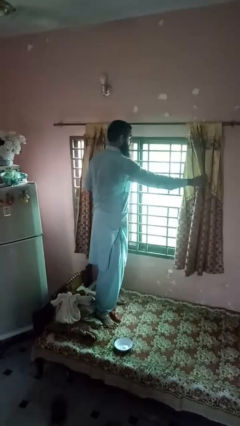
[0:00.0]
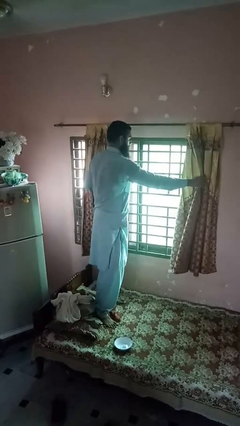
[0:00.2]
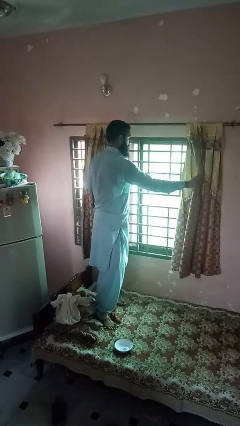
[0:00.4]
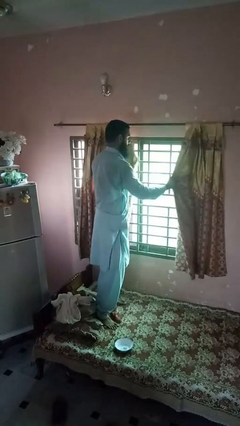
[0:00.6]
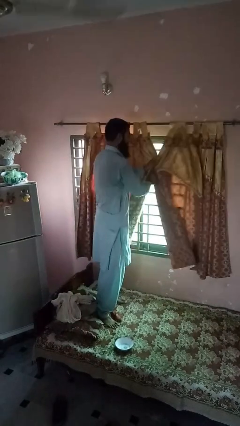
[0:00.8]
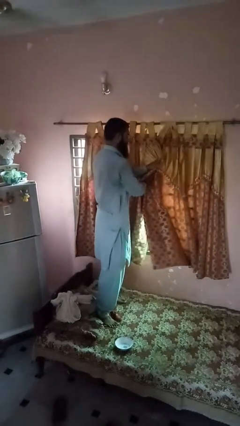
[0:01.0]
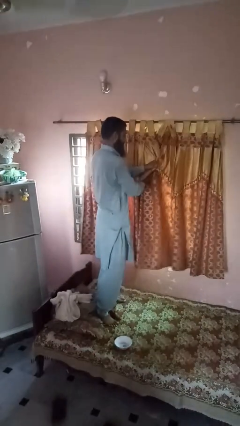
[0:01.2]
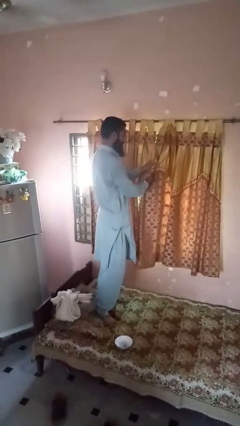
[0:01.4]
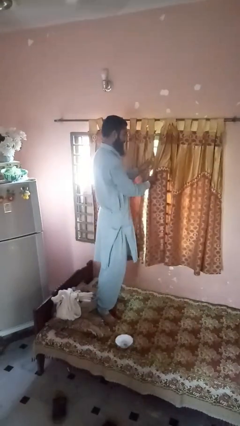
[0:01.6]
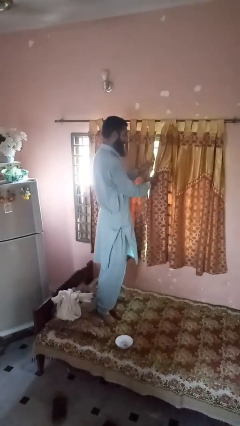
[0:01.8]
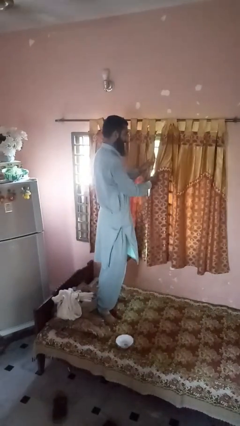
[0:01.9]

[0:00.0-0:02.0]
person closes curtains

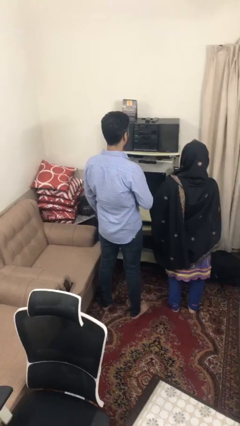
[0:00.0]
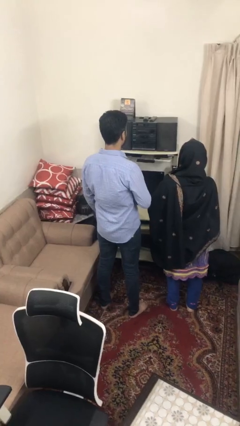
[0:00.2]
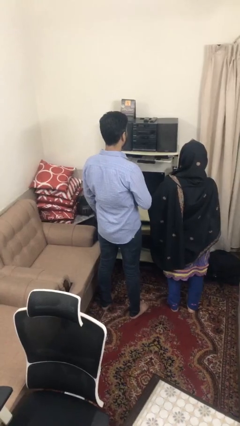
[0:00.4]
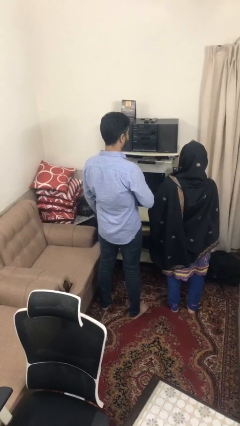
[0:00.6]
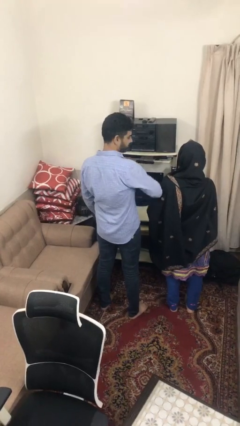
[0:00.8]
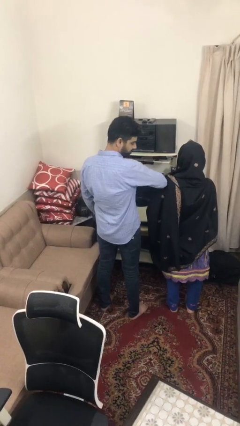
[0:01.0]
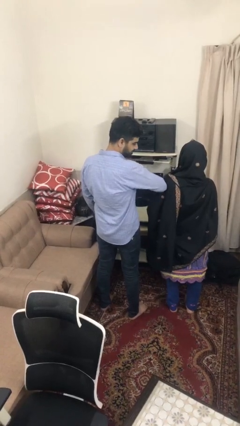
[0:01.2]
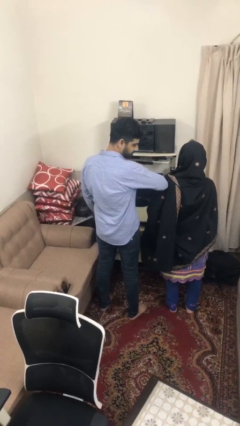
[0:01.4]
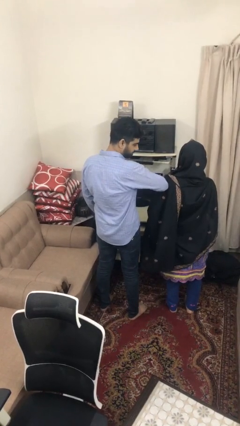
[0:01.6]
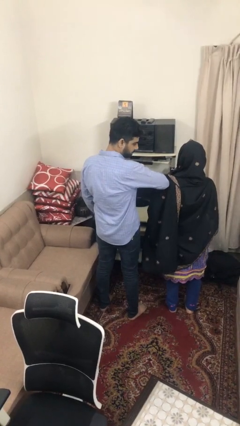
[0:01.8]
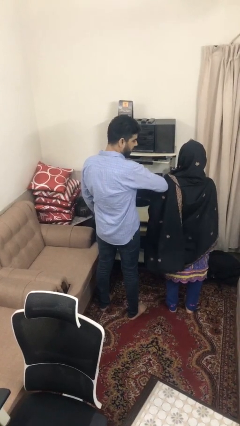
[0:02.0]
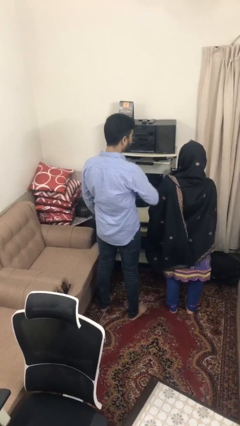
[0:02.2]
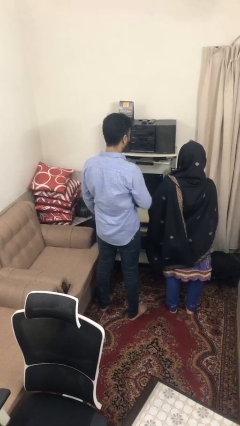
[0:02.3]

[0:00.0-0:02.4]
person nudges person with elbow

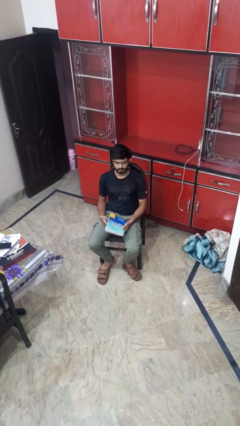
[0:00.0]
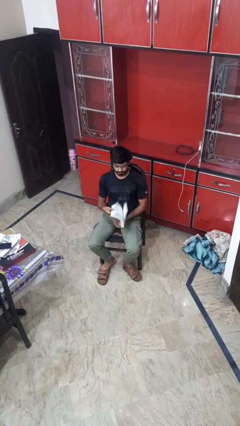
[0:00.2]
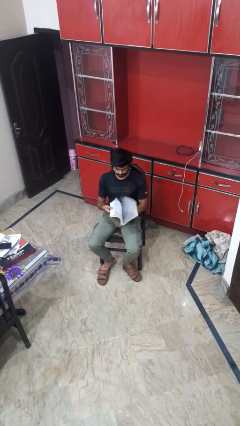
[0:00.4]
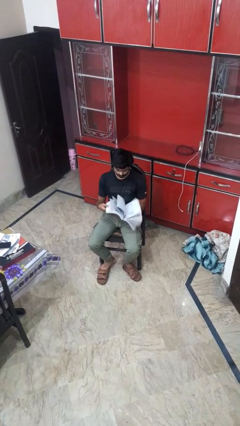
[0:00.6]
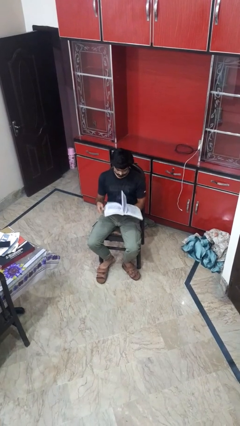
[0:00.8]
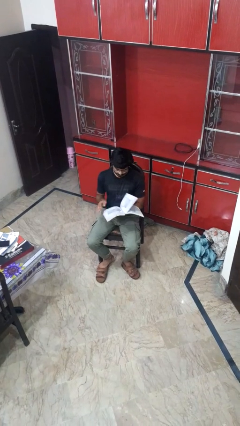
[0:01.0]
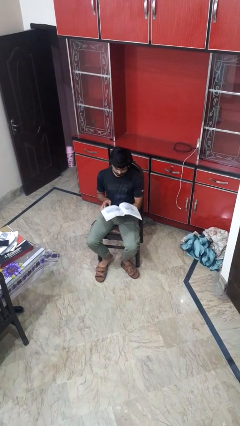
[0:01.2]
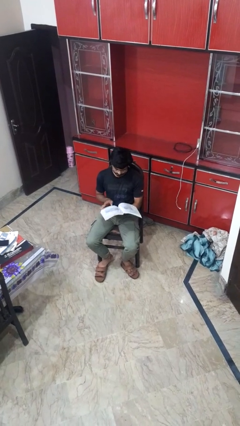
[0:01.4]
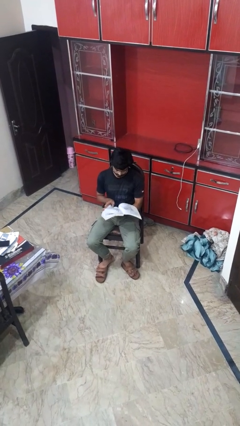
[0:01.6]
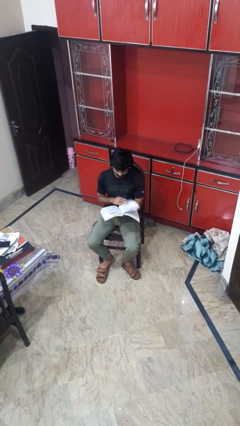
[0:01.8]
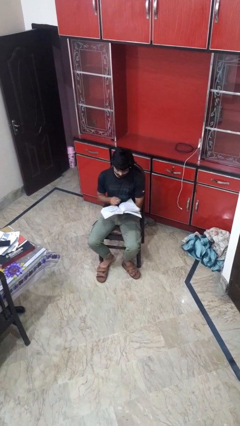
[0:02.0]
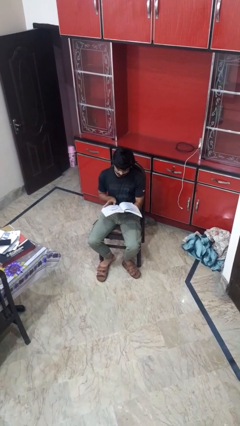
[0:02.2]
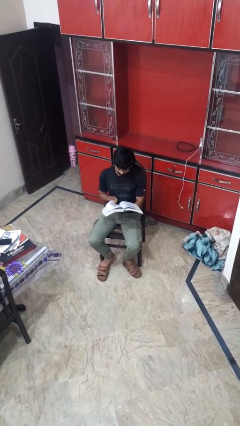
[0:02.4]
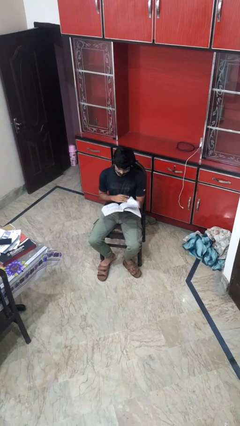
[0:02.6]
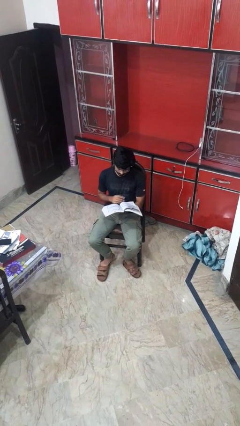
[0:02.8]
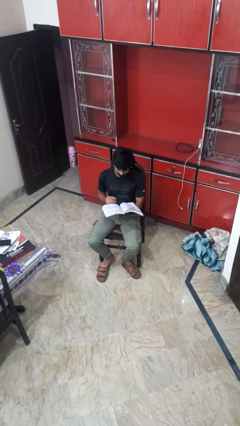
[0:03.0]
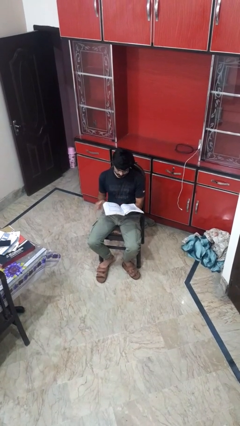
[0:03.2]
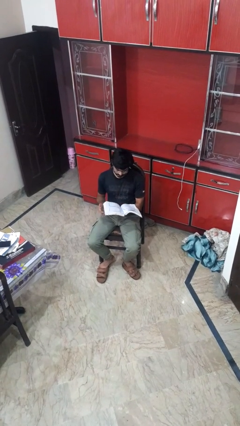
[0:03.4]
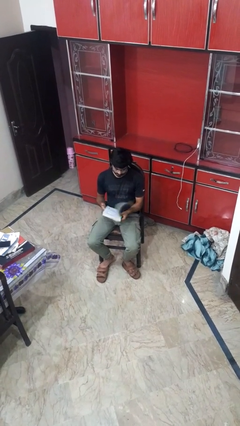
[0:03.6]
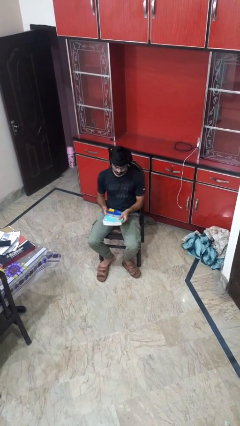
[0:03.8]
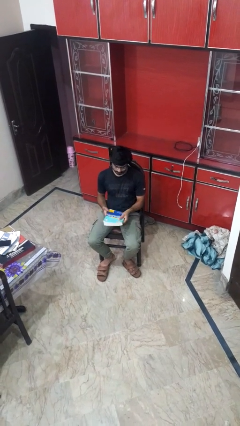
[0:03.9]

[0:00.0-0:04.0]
person reads book

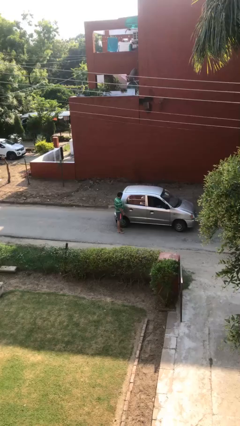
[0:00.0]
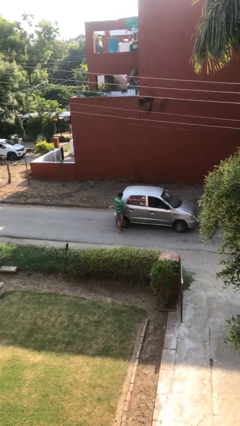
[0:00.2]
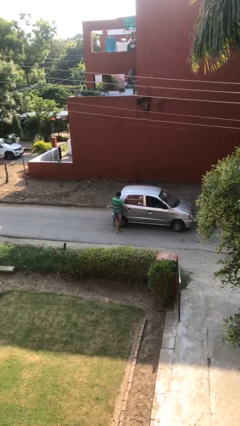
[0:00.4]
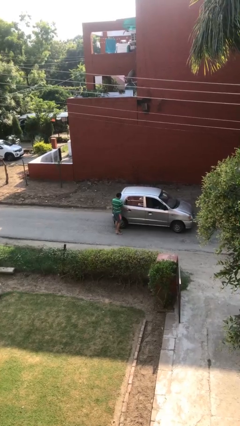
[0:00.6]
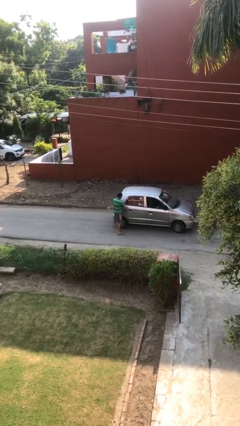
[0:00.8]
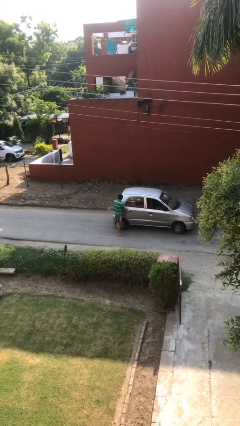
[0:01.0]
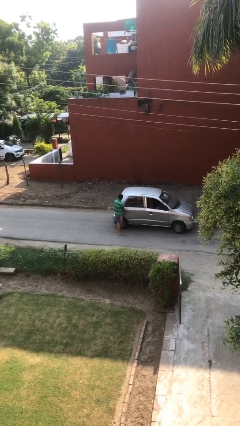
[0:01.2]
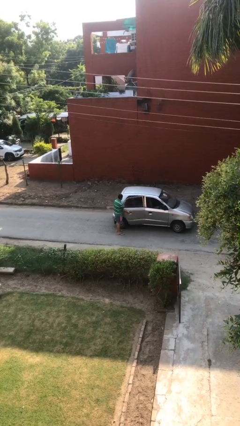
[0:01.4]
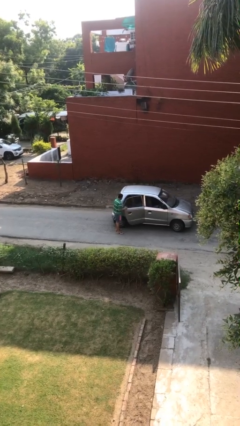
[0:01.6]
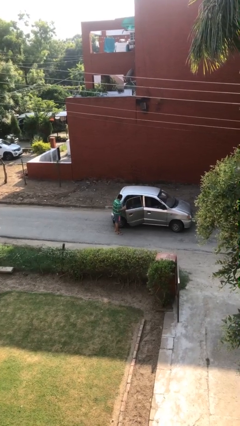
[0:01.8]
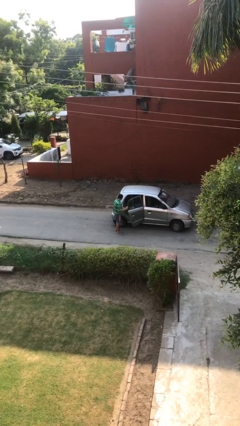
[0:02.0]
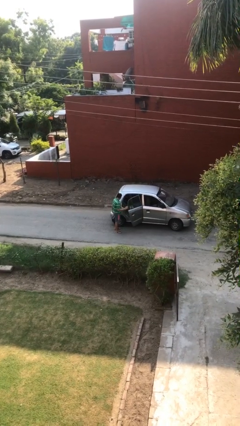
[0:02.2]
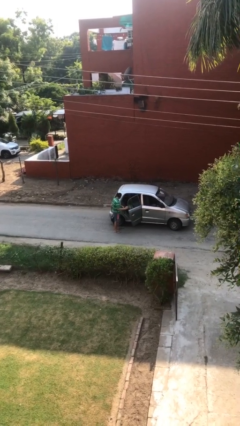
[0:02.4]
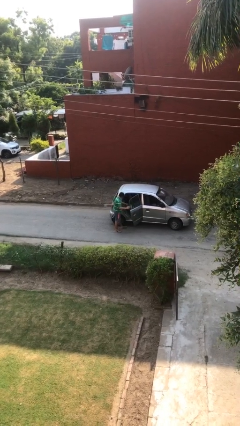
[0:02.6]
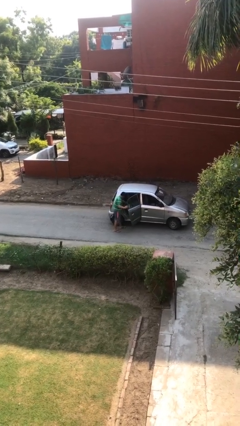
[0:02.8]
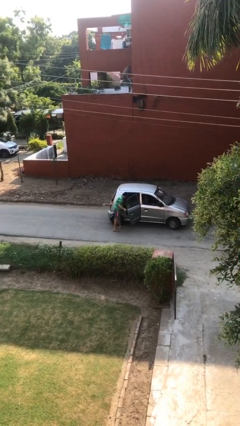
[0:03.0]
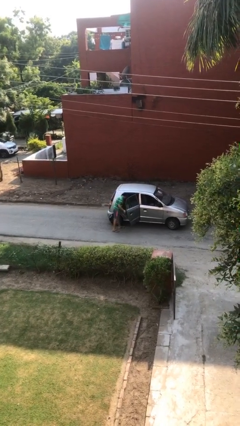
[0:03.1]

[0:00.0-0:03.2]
person opens car door

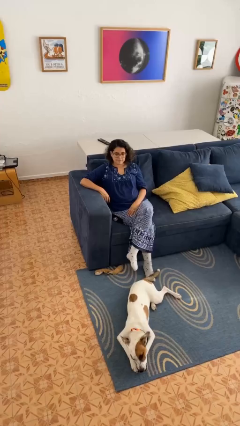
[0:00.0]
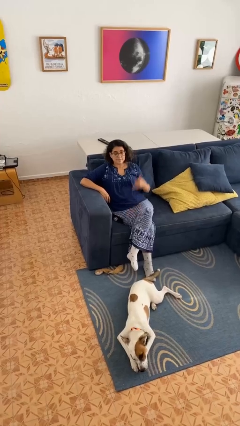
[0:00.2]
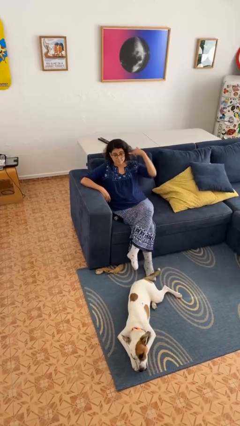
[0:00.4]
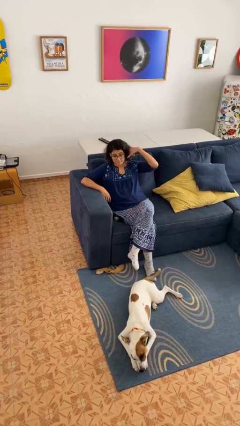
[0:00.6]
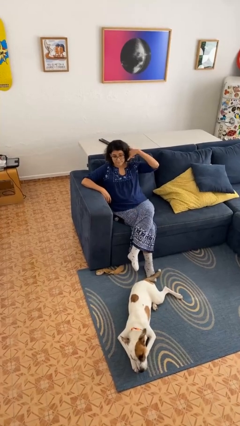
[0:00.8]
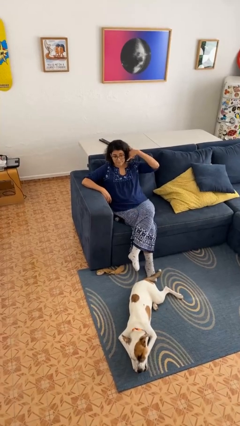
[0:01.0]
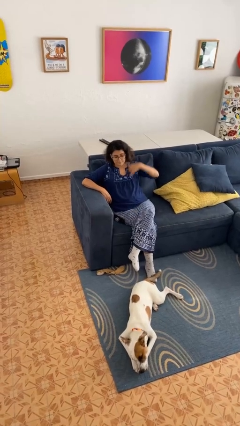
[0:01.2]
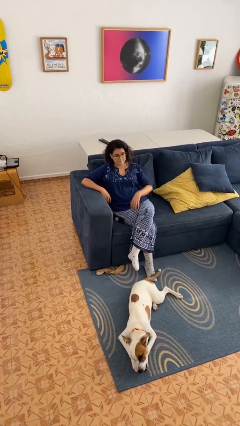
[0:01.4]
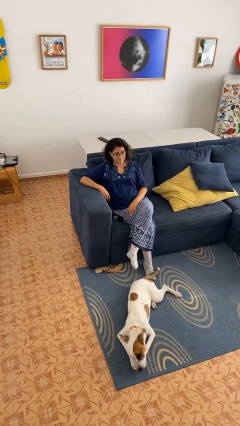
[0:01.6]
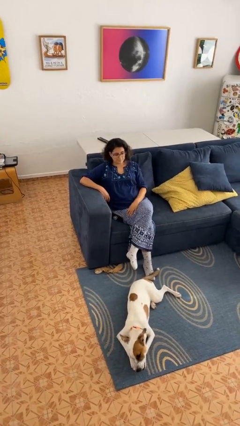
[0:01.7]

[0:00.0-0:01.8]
person gestures call me

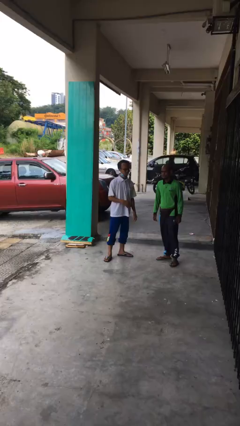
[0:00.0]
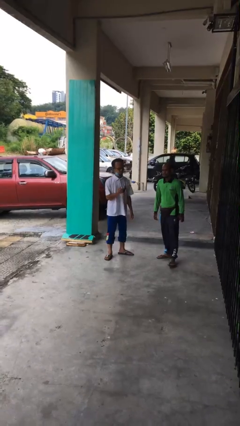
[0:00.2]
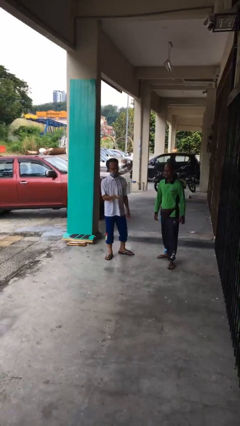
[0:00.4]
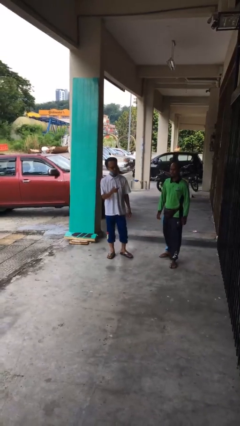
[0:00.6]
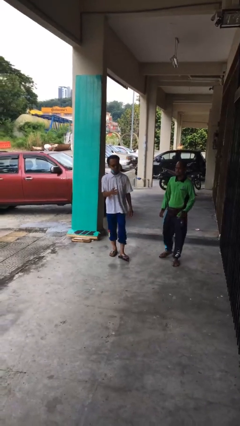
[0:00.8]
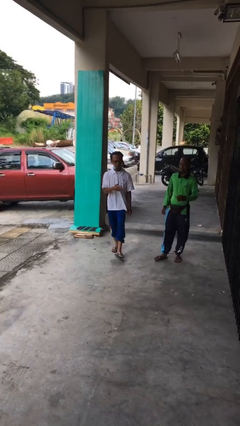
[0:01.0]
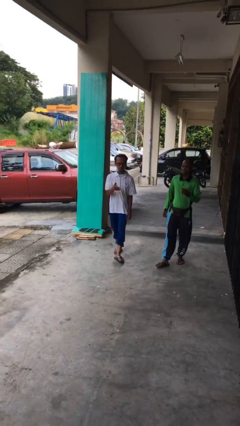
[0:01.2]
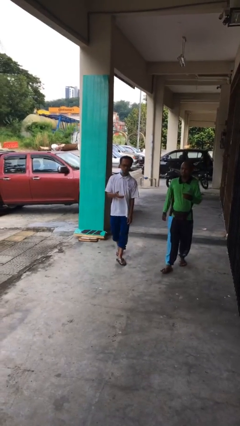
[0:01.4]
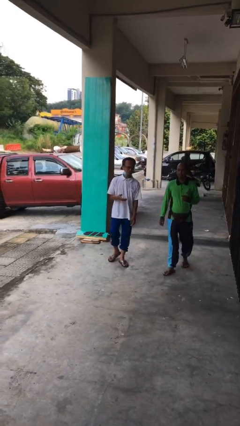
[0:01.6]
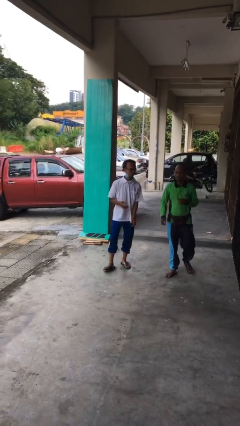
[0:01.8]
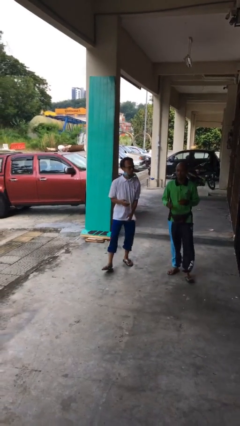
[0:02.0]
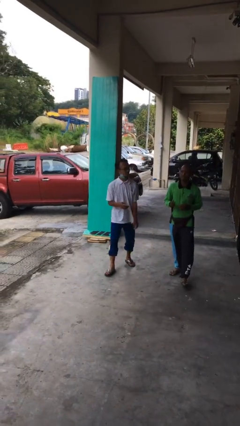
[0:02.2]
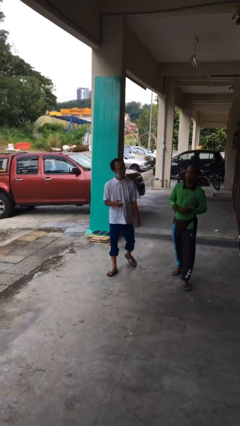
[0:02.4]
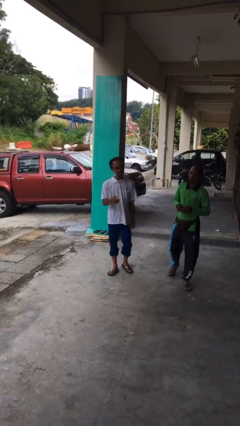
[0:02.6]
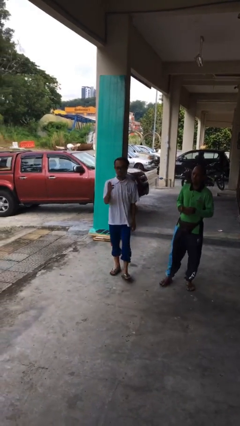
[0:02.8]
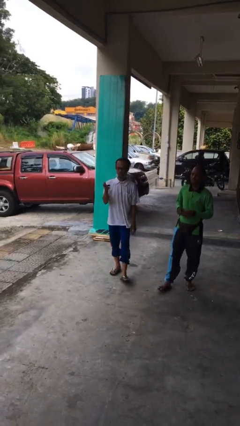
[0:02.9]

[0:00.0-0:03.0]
person talks to person

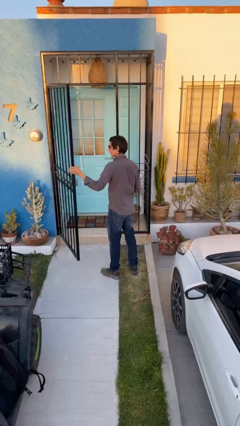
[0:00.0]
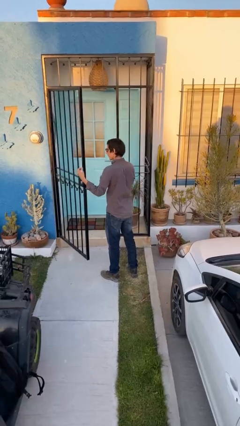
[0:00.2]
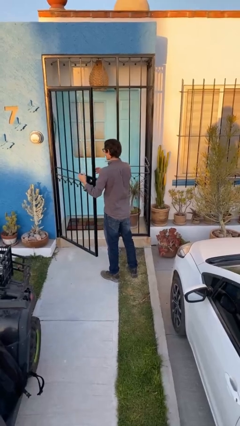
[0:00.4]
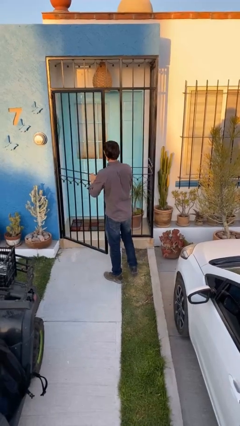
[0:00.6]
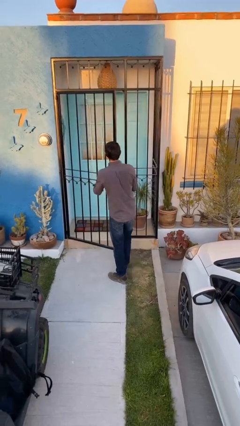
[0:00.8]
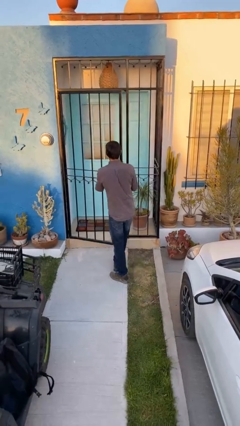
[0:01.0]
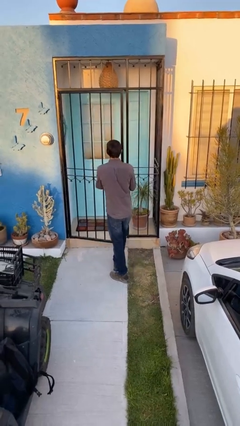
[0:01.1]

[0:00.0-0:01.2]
person closes facility door
